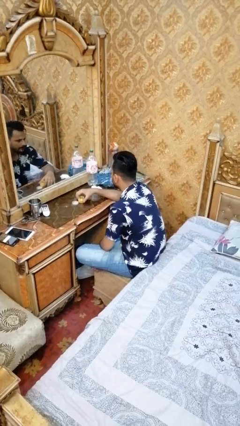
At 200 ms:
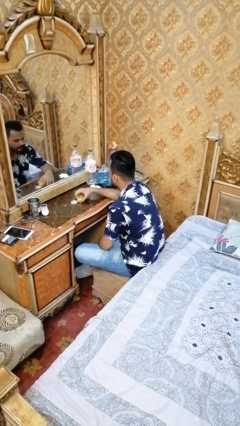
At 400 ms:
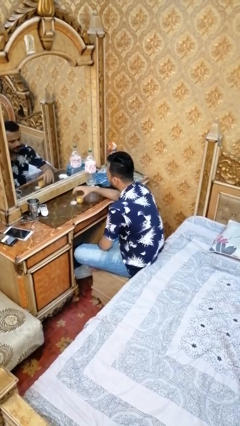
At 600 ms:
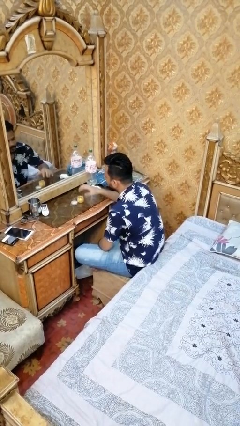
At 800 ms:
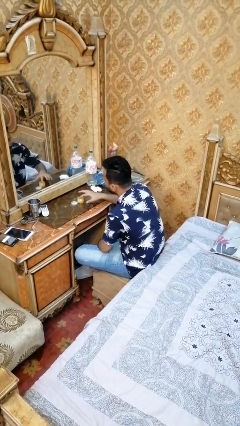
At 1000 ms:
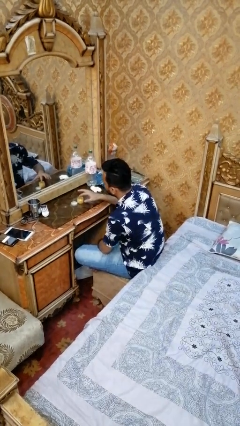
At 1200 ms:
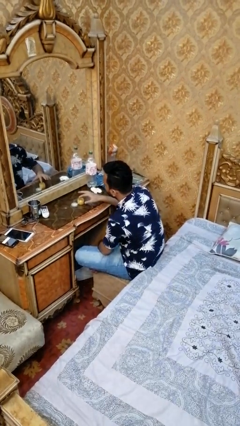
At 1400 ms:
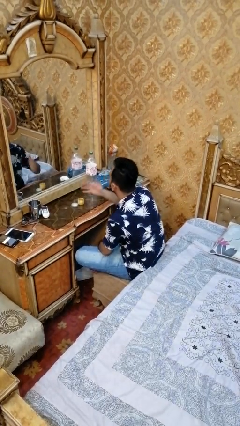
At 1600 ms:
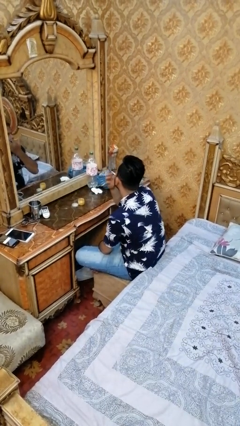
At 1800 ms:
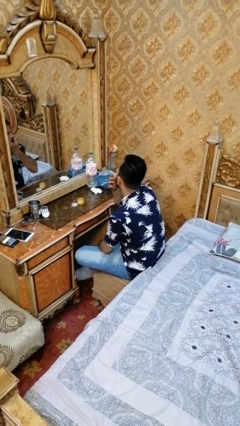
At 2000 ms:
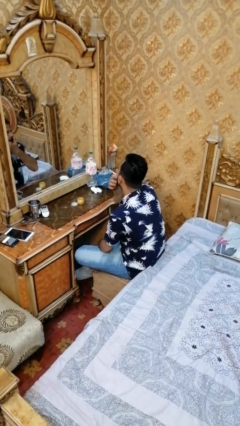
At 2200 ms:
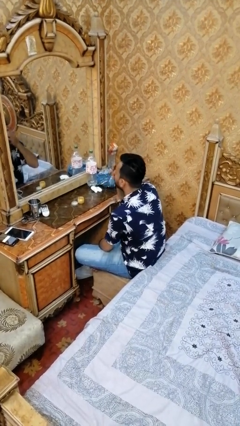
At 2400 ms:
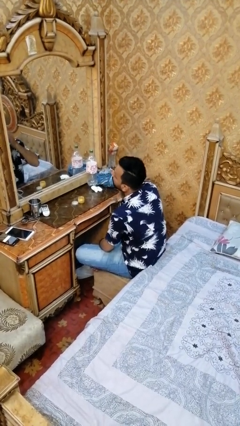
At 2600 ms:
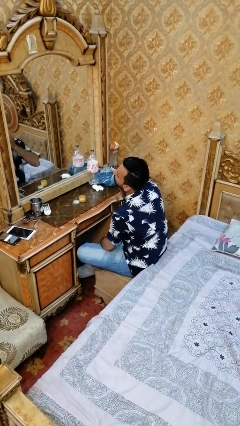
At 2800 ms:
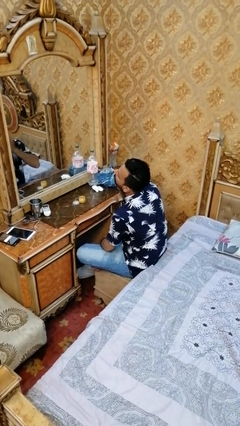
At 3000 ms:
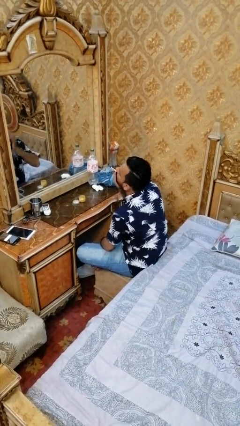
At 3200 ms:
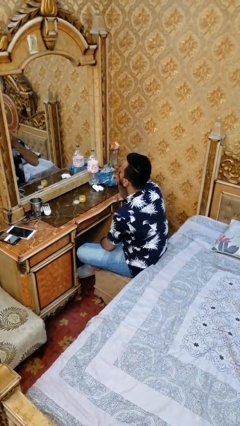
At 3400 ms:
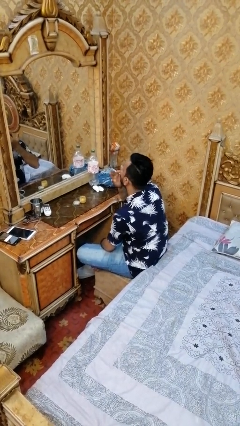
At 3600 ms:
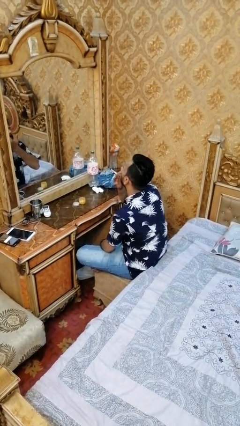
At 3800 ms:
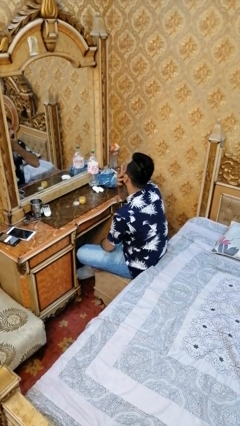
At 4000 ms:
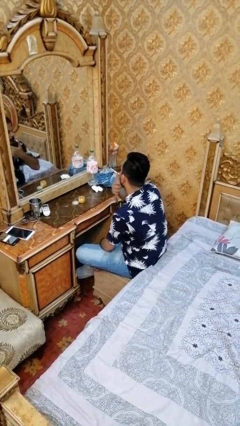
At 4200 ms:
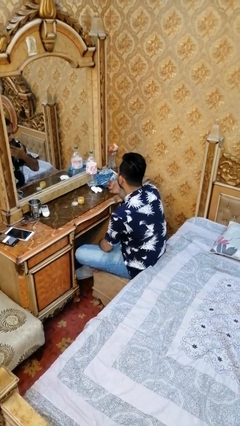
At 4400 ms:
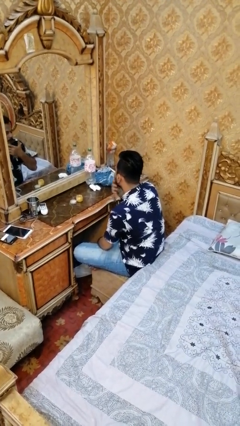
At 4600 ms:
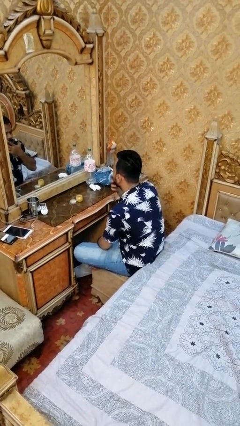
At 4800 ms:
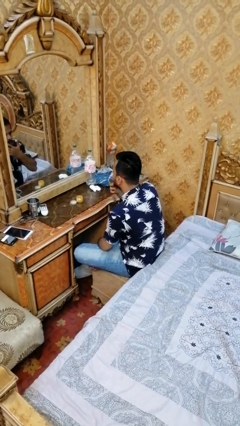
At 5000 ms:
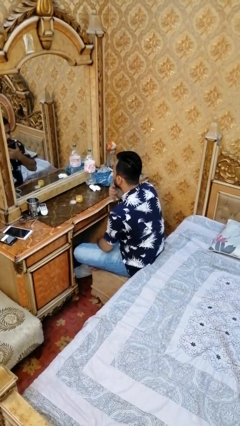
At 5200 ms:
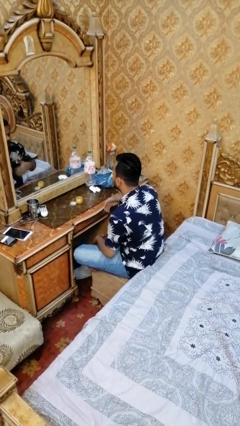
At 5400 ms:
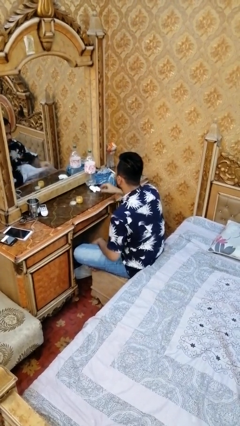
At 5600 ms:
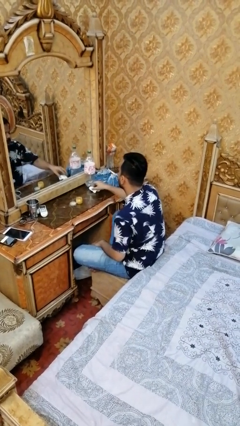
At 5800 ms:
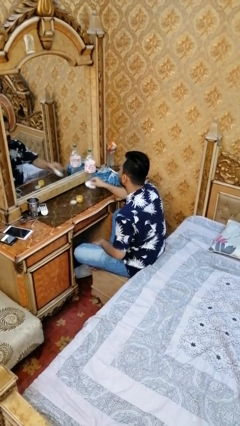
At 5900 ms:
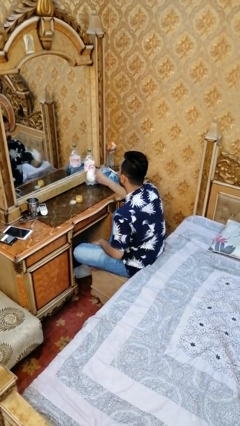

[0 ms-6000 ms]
person puts on facemask

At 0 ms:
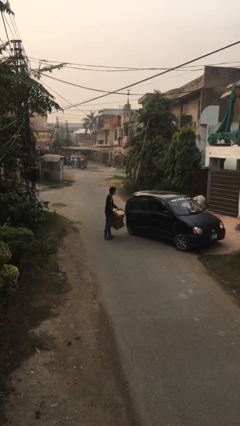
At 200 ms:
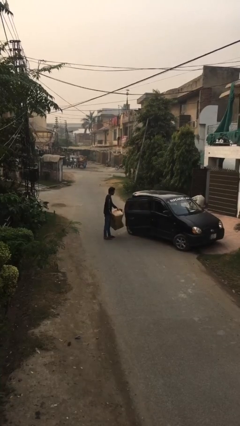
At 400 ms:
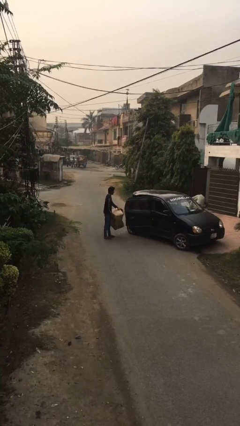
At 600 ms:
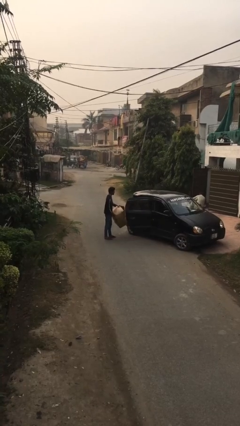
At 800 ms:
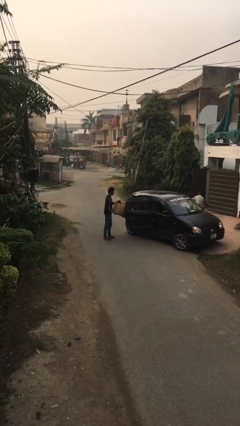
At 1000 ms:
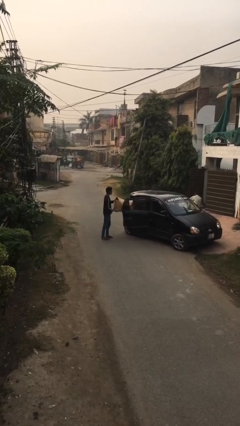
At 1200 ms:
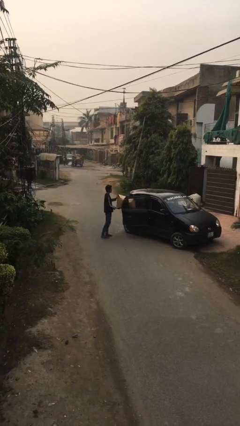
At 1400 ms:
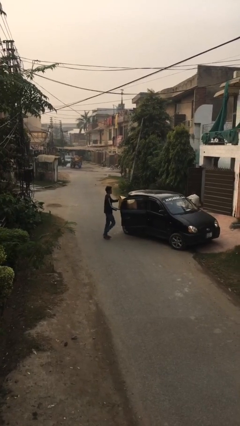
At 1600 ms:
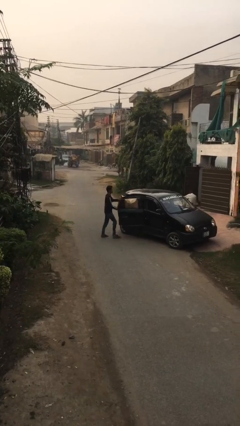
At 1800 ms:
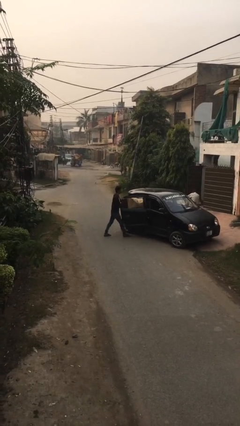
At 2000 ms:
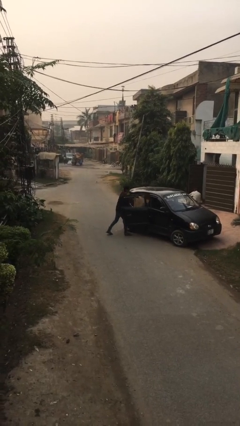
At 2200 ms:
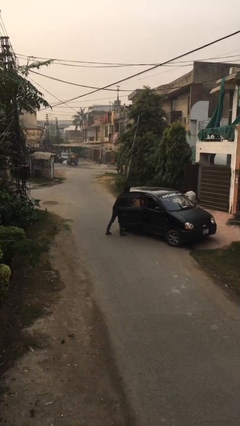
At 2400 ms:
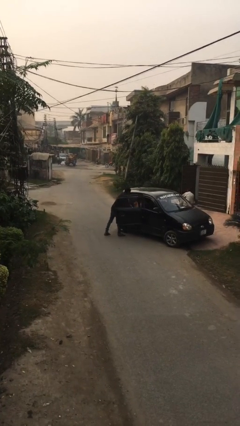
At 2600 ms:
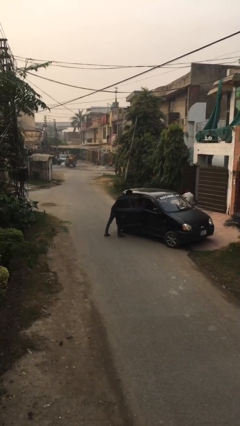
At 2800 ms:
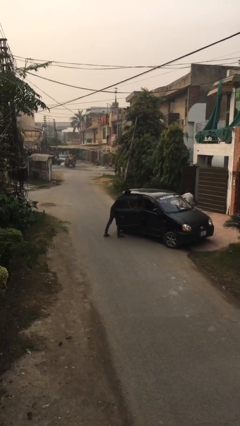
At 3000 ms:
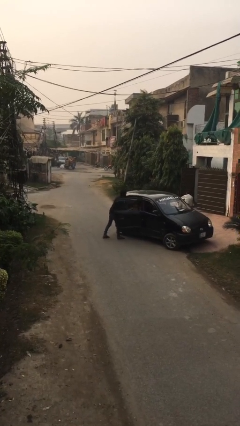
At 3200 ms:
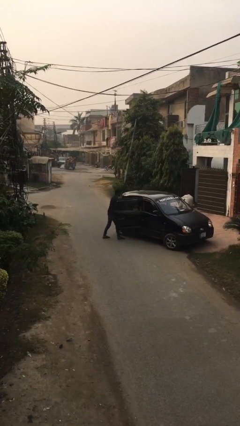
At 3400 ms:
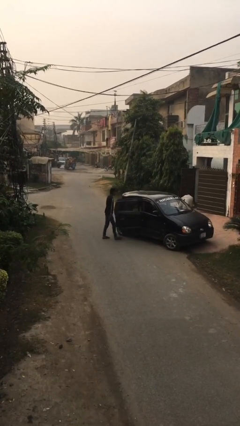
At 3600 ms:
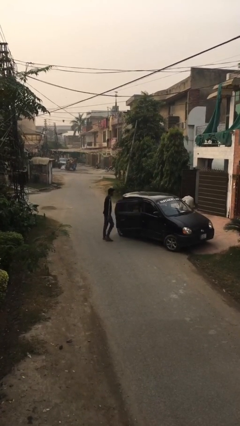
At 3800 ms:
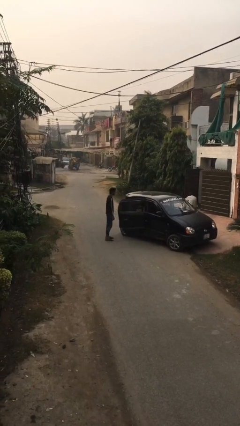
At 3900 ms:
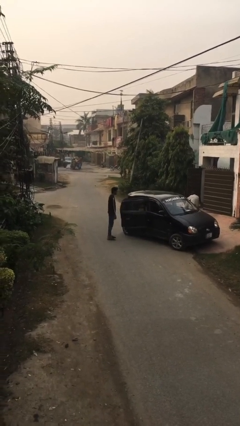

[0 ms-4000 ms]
person loads car

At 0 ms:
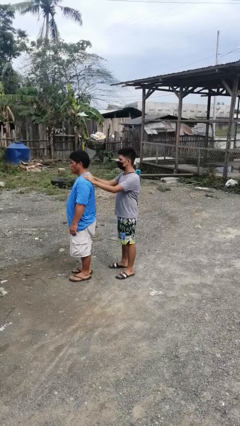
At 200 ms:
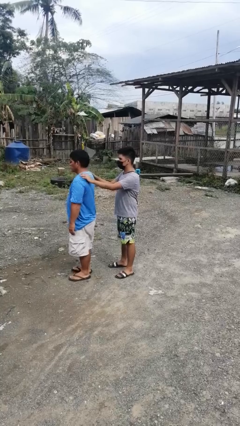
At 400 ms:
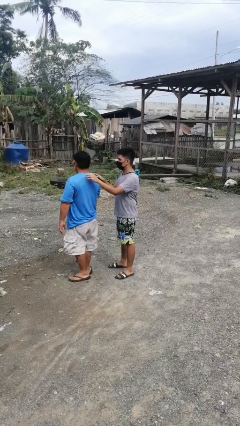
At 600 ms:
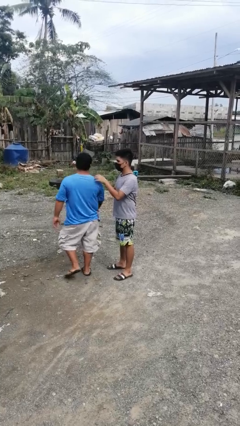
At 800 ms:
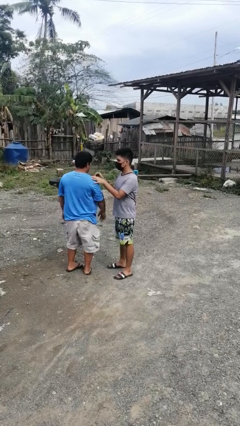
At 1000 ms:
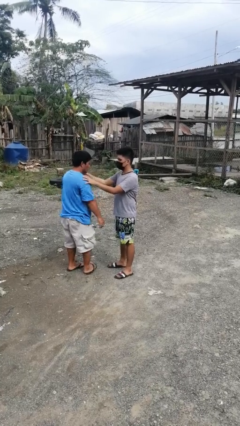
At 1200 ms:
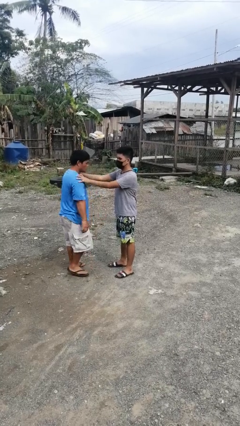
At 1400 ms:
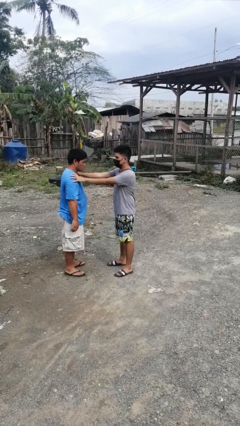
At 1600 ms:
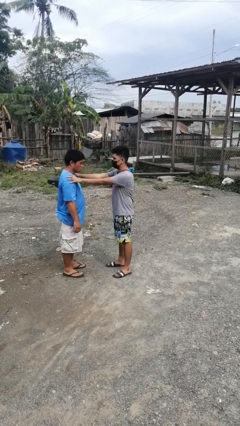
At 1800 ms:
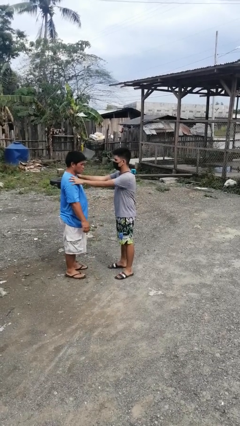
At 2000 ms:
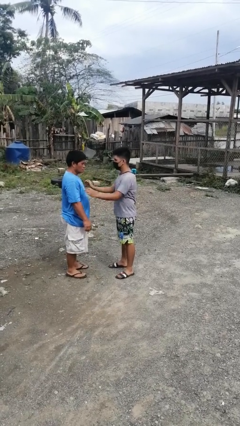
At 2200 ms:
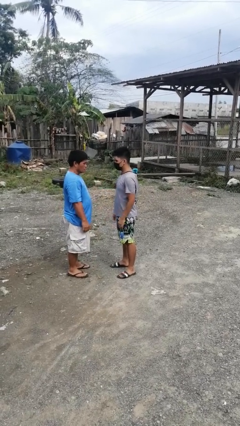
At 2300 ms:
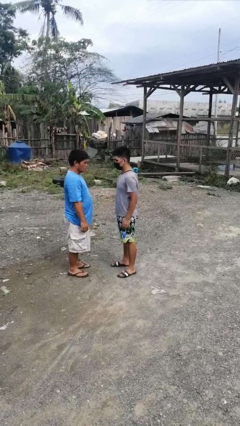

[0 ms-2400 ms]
person spins person around

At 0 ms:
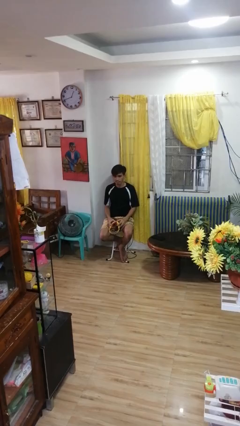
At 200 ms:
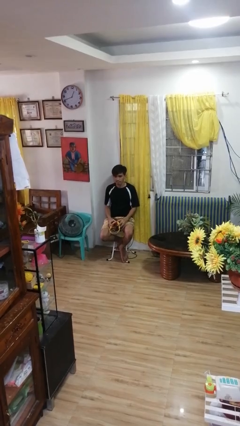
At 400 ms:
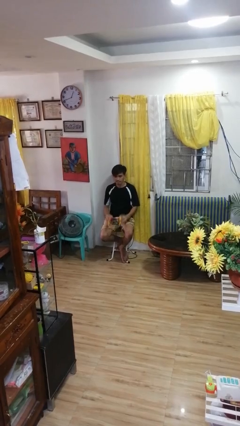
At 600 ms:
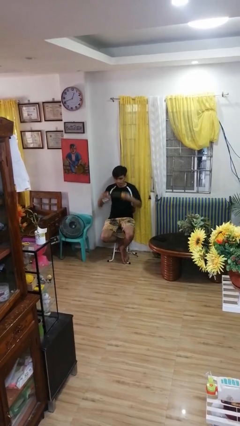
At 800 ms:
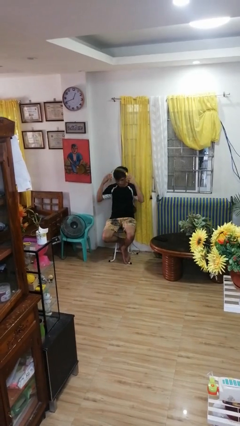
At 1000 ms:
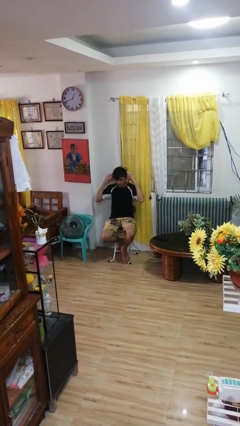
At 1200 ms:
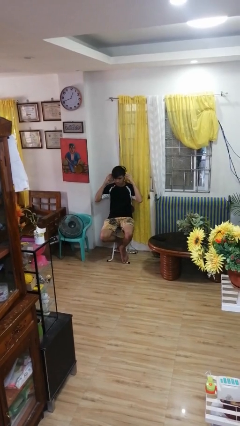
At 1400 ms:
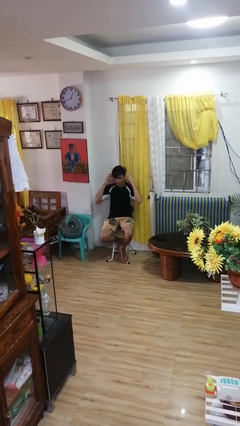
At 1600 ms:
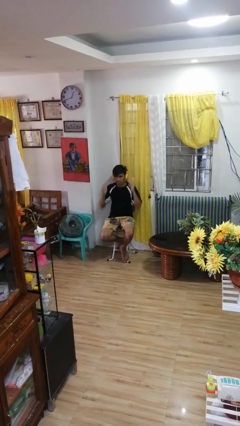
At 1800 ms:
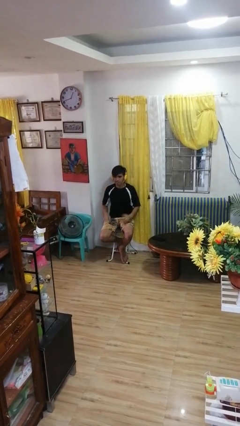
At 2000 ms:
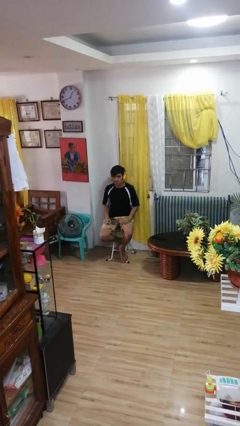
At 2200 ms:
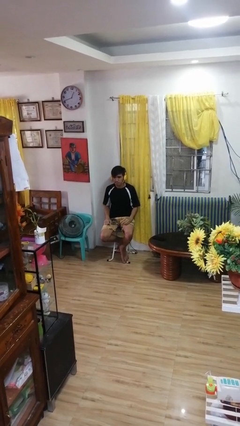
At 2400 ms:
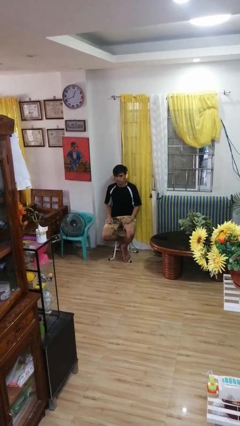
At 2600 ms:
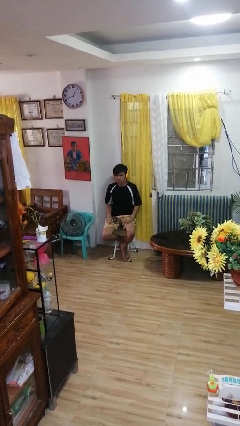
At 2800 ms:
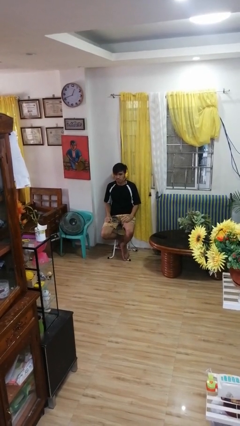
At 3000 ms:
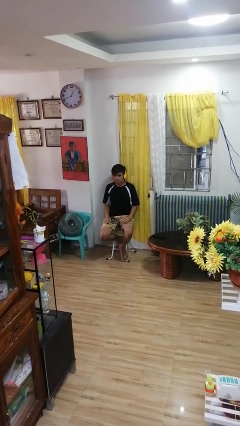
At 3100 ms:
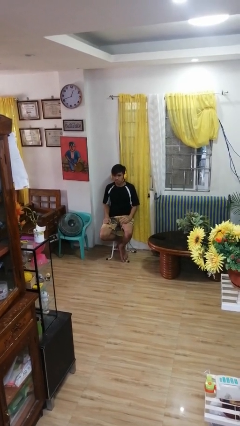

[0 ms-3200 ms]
person puts on headphones

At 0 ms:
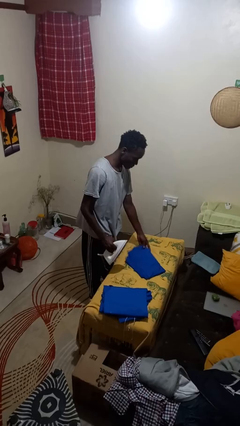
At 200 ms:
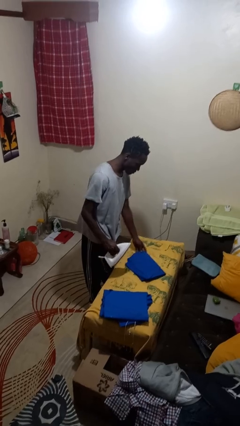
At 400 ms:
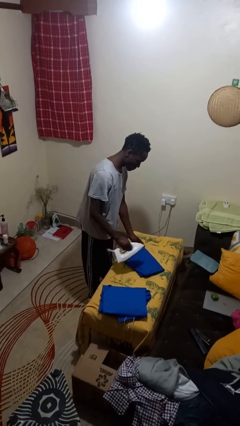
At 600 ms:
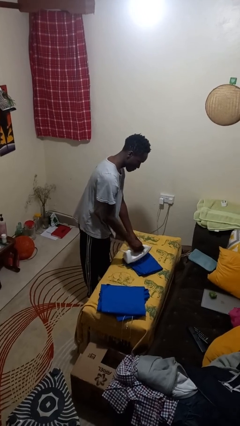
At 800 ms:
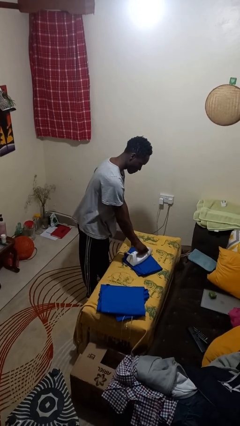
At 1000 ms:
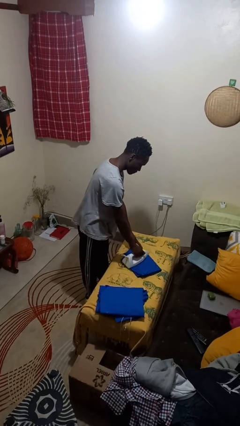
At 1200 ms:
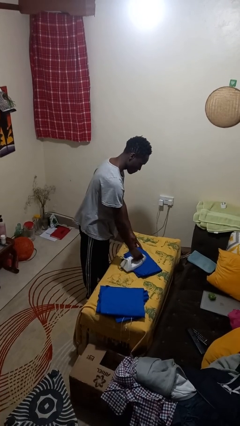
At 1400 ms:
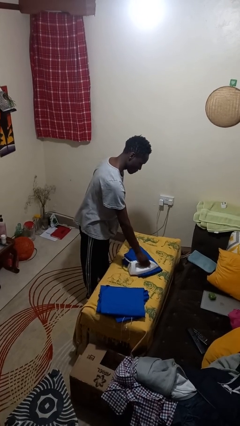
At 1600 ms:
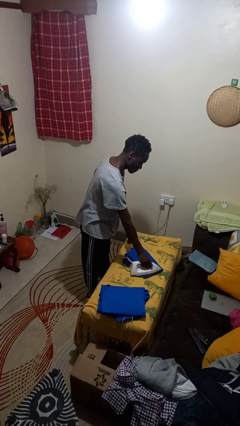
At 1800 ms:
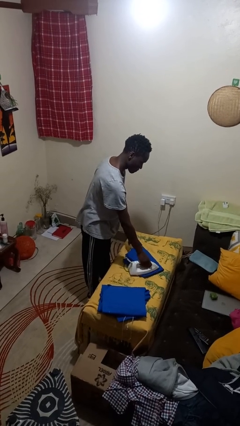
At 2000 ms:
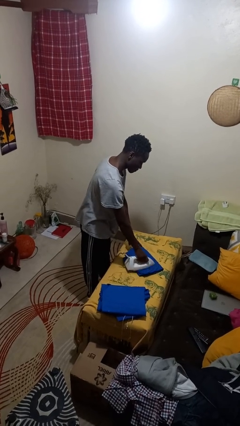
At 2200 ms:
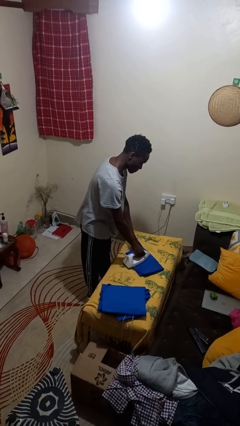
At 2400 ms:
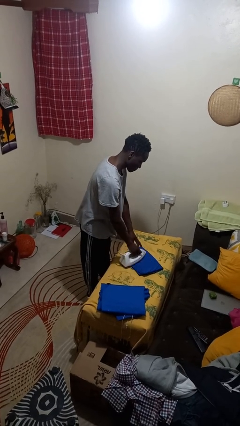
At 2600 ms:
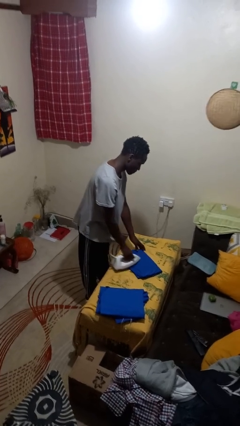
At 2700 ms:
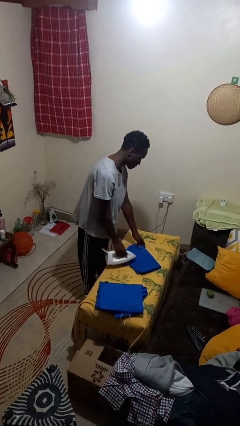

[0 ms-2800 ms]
person irons clothes
